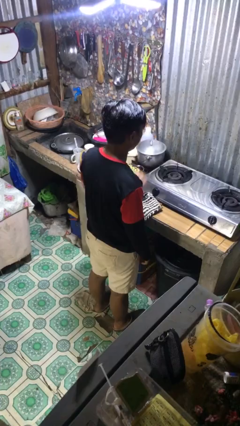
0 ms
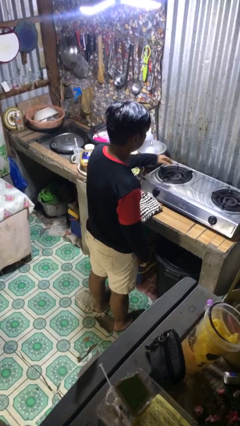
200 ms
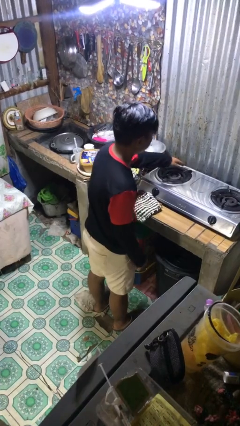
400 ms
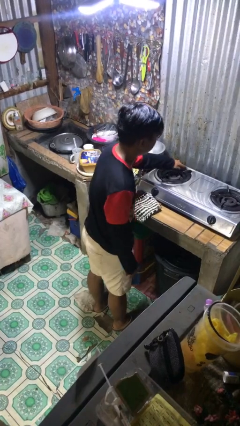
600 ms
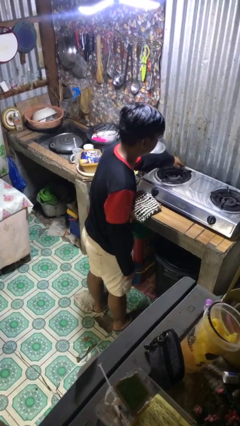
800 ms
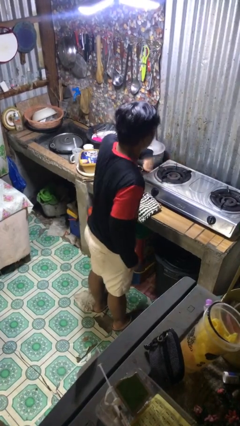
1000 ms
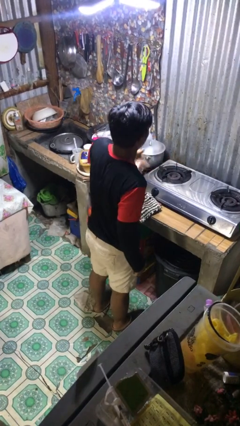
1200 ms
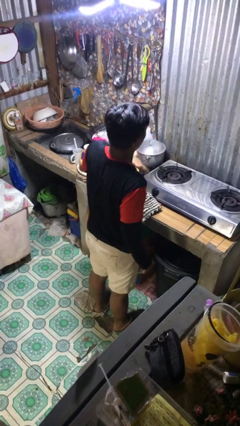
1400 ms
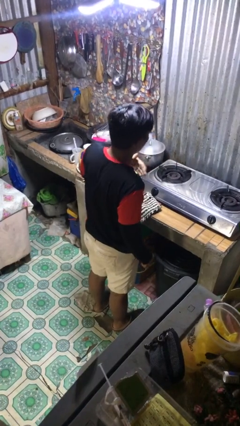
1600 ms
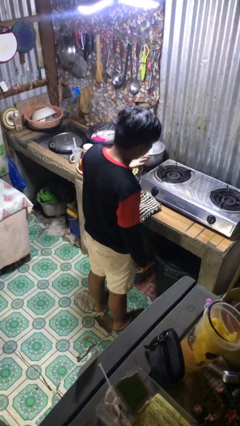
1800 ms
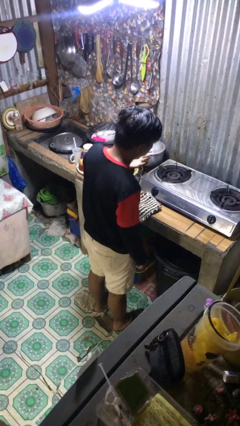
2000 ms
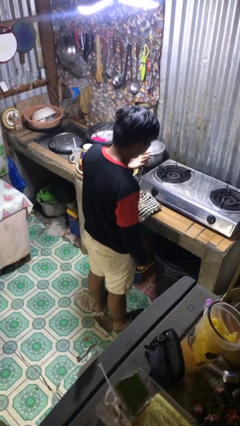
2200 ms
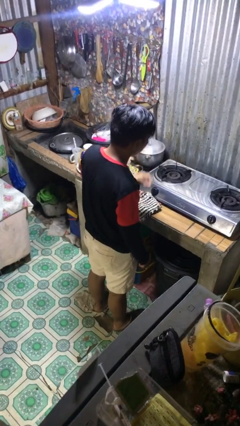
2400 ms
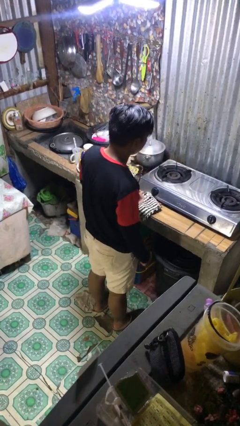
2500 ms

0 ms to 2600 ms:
person burns hand

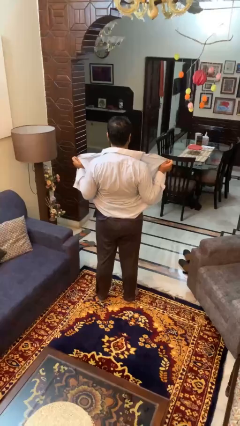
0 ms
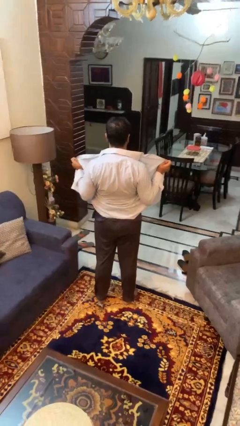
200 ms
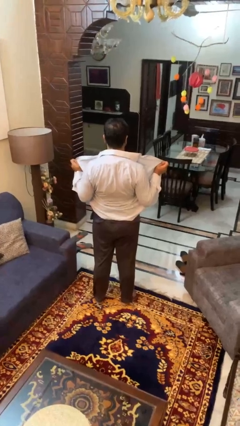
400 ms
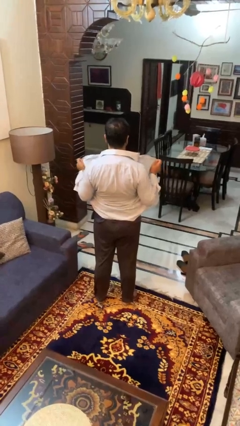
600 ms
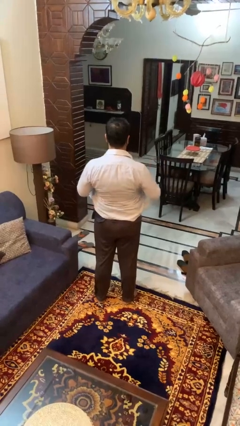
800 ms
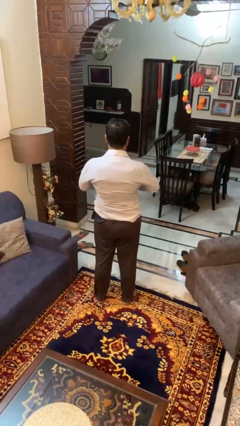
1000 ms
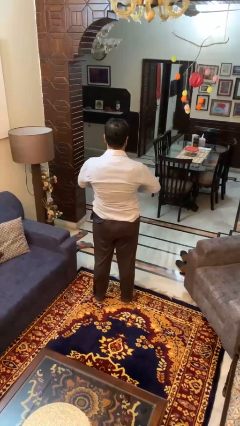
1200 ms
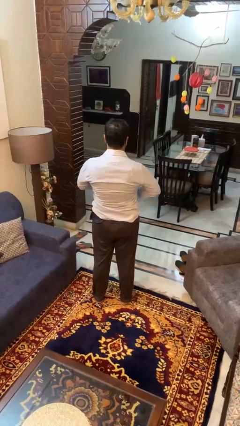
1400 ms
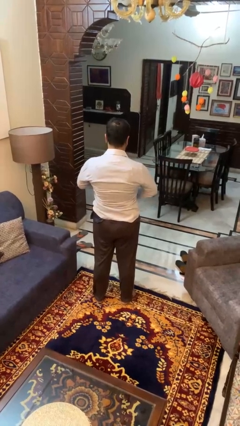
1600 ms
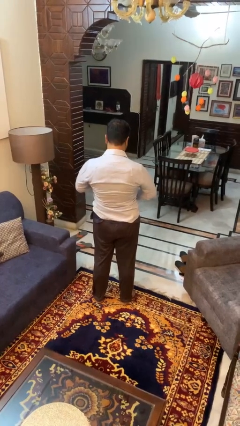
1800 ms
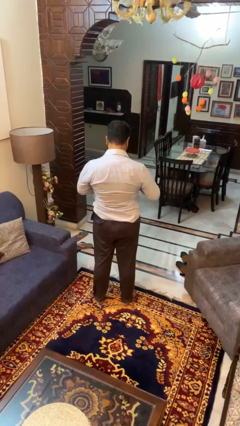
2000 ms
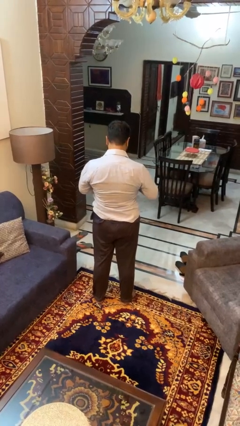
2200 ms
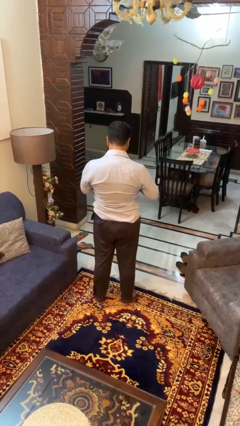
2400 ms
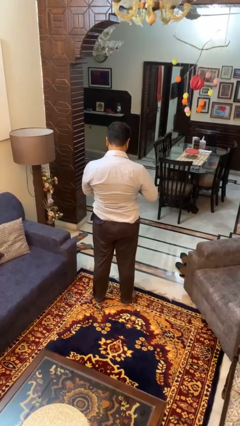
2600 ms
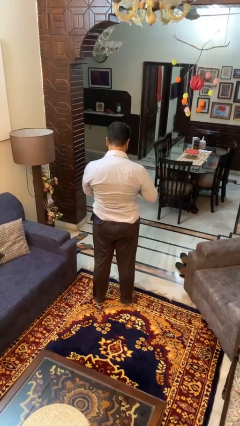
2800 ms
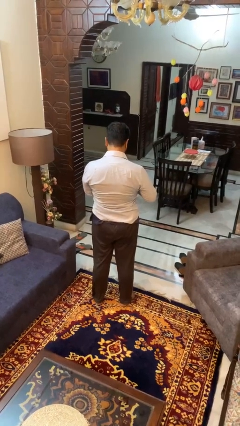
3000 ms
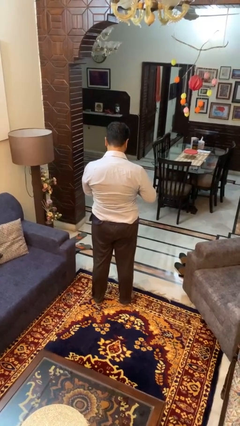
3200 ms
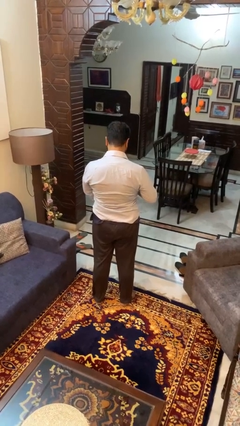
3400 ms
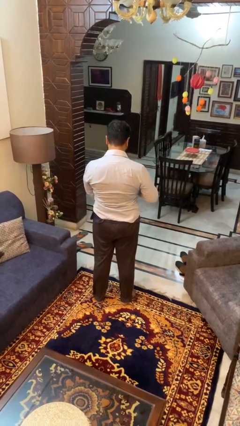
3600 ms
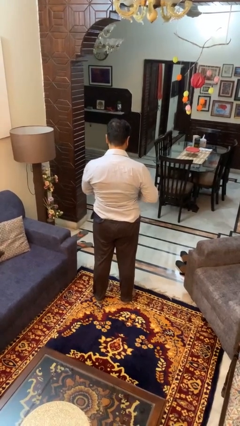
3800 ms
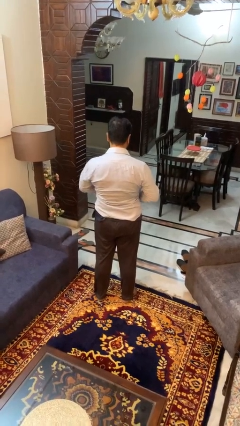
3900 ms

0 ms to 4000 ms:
person buttons shirt

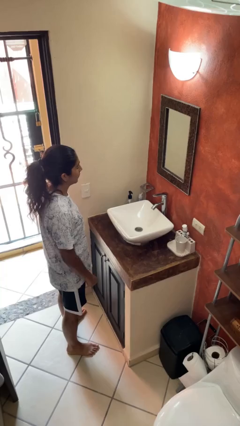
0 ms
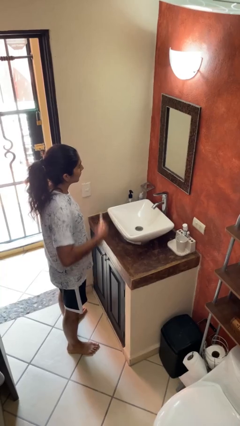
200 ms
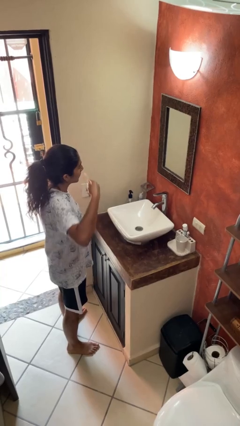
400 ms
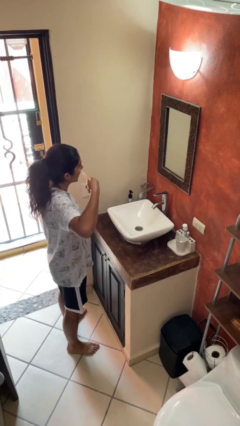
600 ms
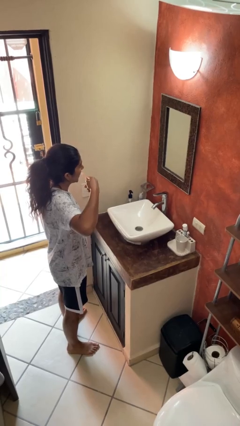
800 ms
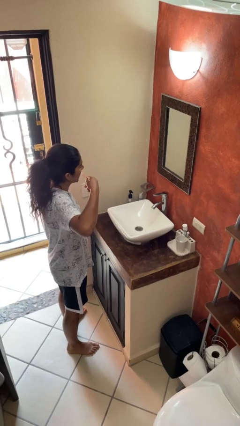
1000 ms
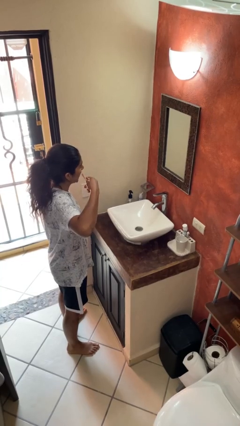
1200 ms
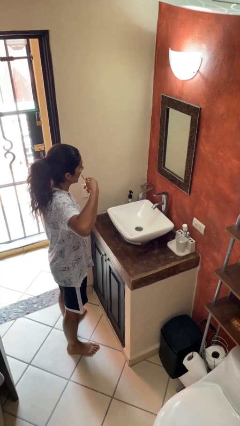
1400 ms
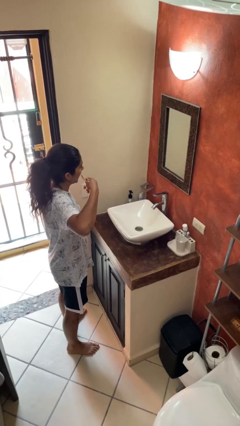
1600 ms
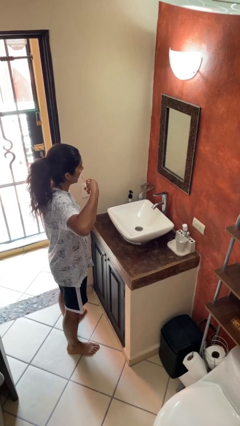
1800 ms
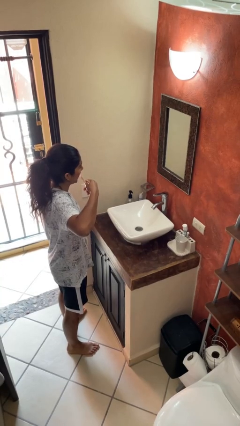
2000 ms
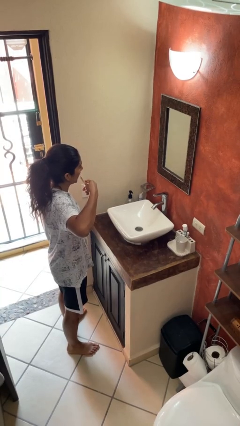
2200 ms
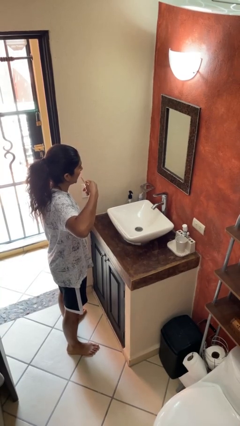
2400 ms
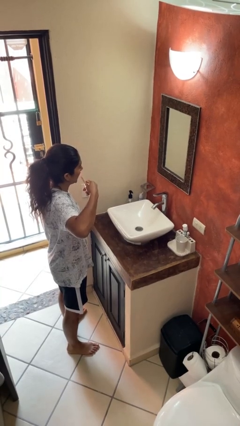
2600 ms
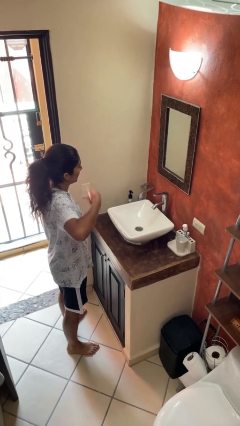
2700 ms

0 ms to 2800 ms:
person brushes teeth

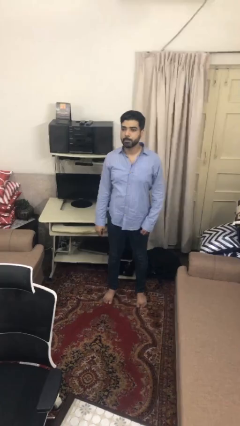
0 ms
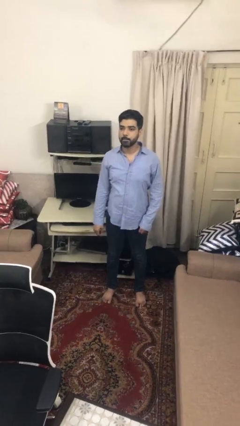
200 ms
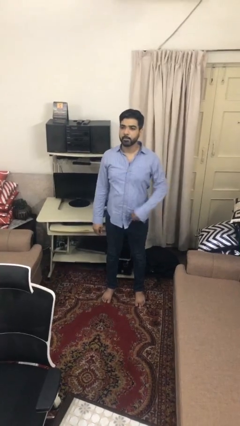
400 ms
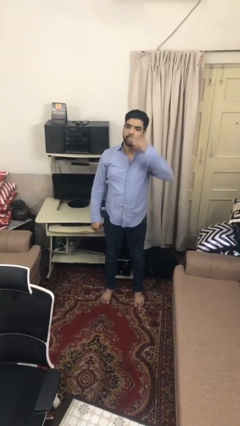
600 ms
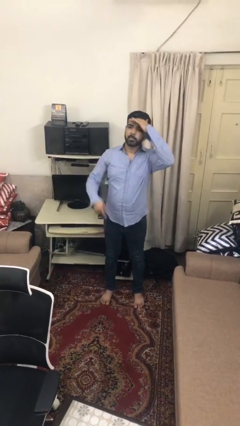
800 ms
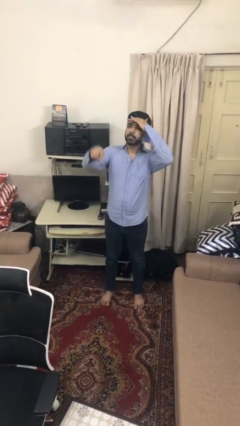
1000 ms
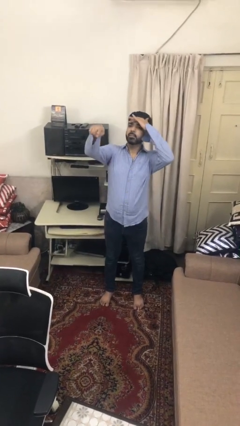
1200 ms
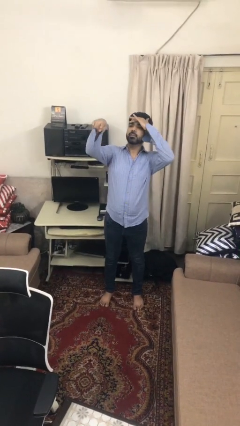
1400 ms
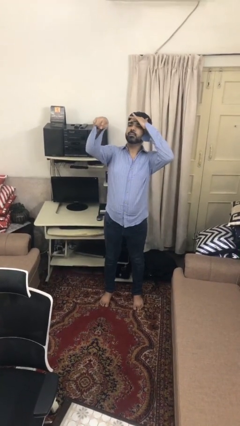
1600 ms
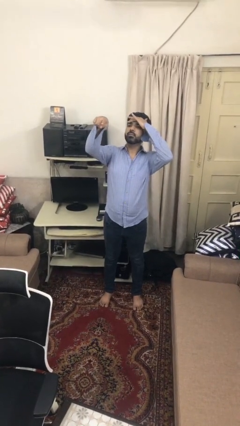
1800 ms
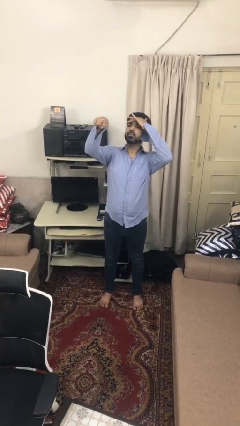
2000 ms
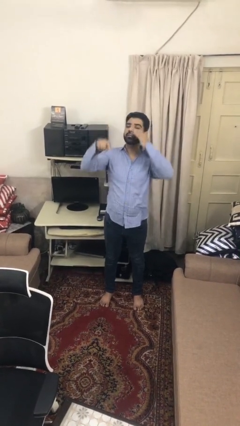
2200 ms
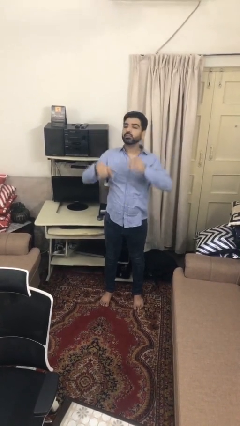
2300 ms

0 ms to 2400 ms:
person points at person

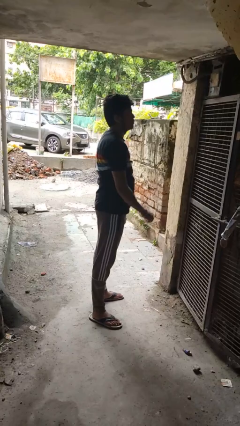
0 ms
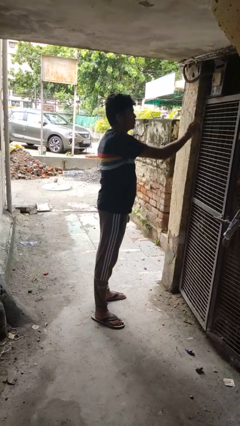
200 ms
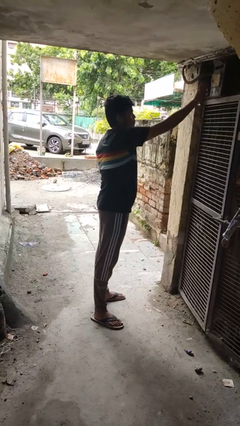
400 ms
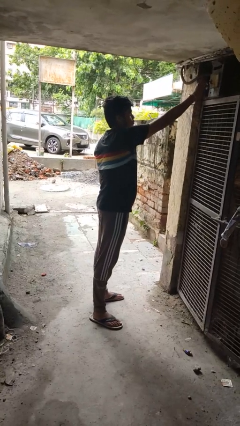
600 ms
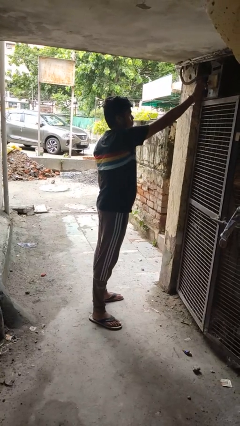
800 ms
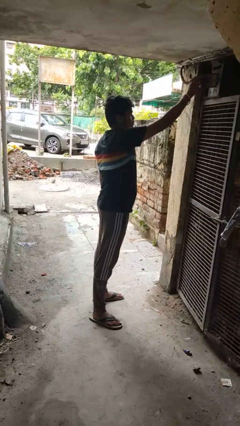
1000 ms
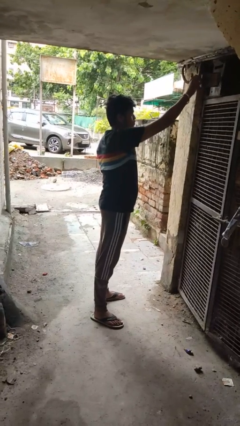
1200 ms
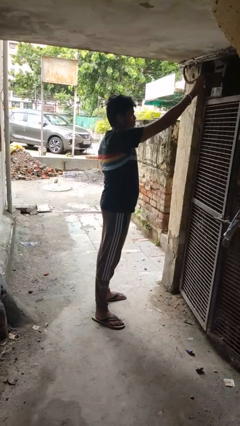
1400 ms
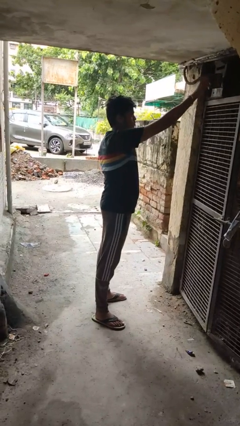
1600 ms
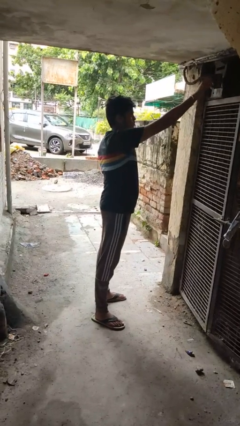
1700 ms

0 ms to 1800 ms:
person opens mailbox

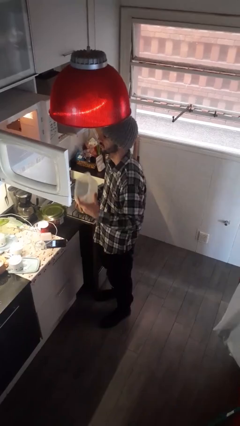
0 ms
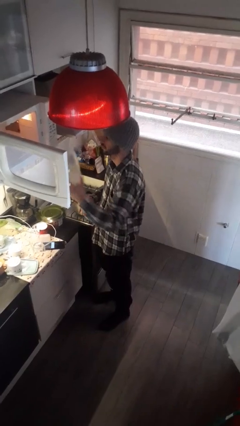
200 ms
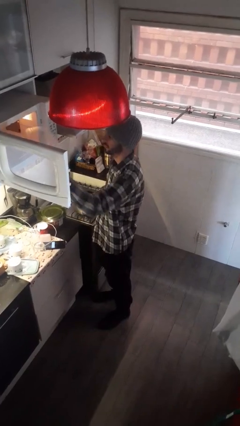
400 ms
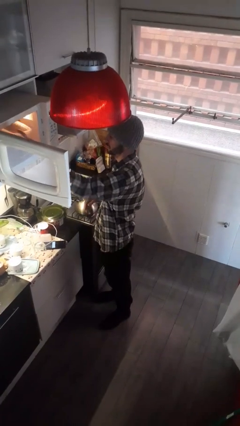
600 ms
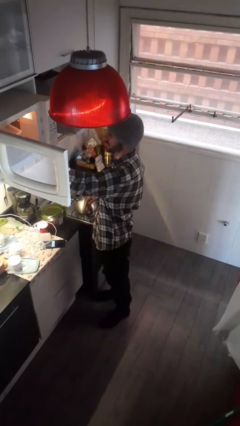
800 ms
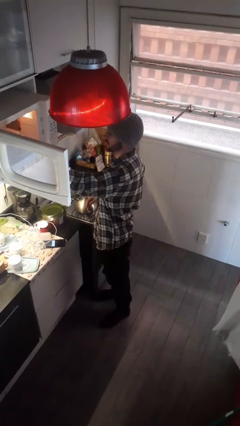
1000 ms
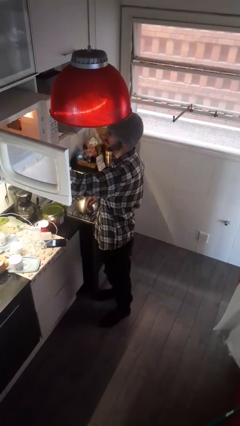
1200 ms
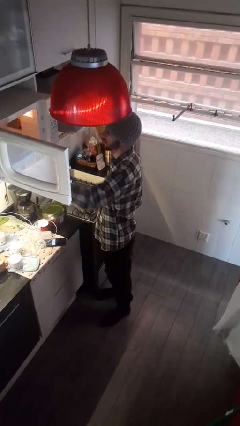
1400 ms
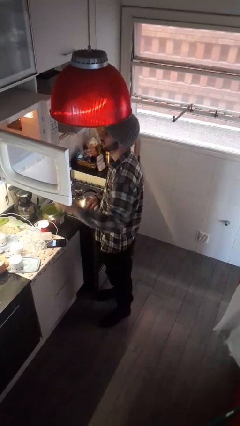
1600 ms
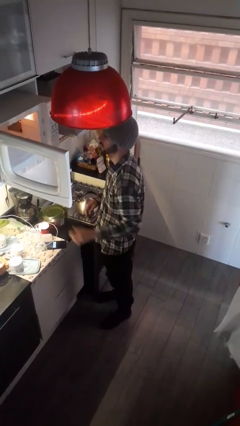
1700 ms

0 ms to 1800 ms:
person puts object into microwave

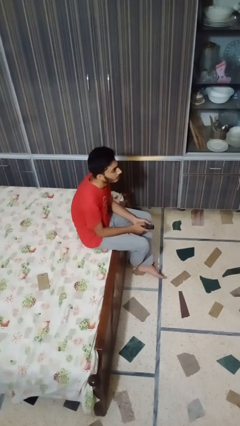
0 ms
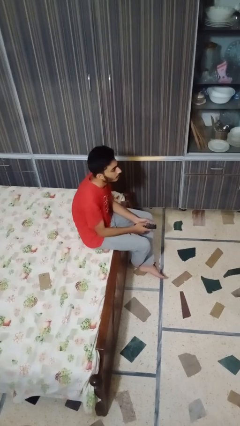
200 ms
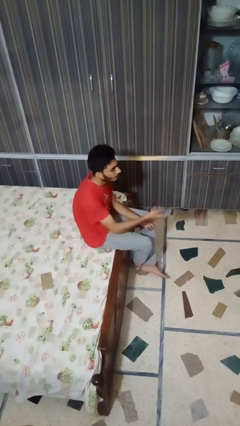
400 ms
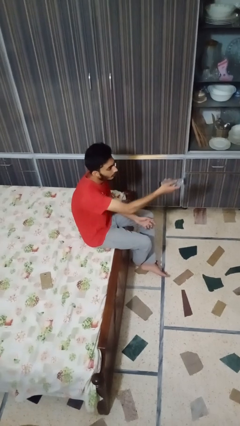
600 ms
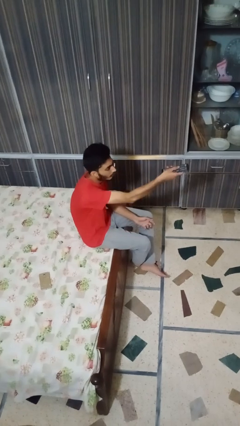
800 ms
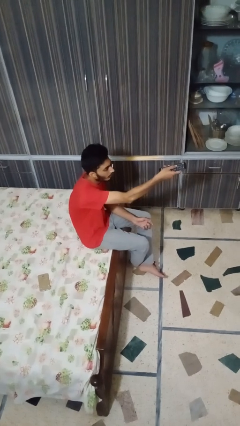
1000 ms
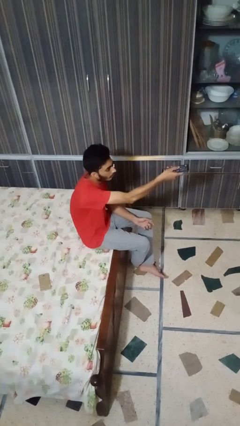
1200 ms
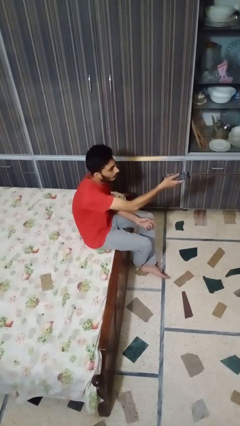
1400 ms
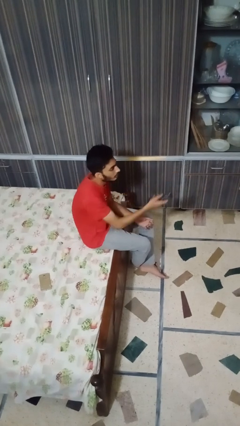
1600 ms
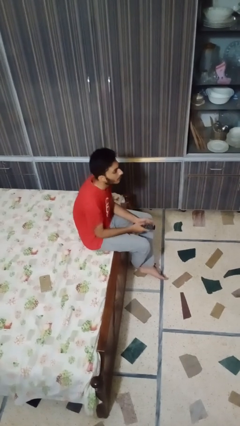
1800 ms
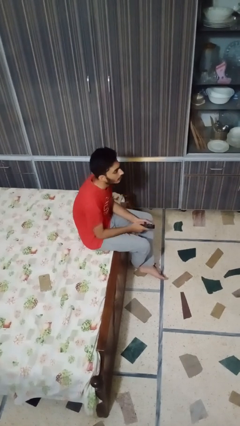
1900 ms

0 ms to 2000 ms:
person uses television remote
